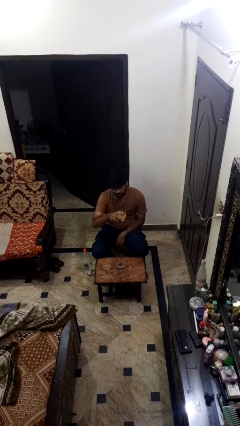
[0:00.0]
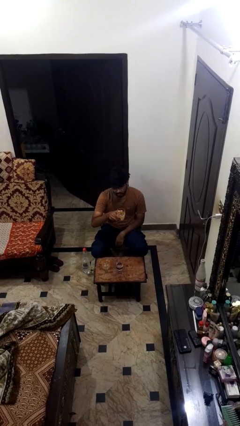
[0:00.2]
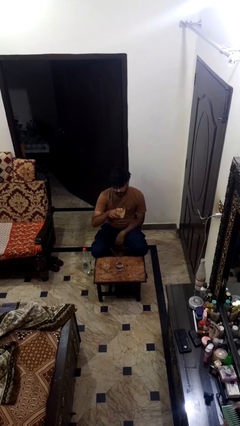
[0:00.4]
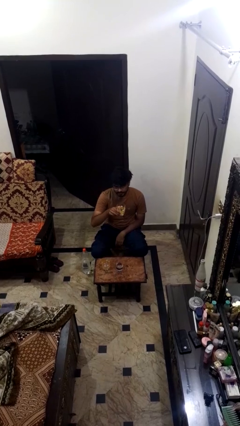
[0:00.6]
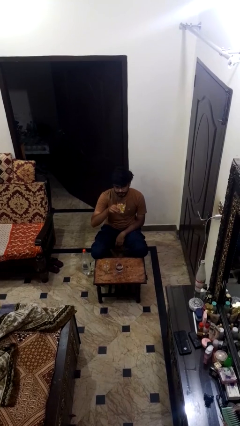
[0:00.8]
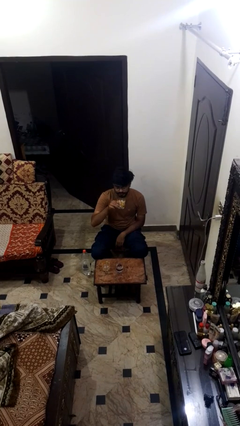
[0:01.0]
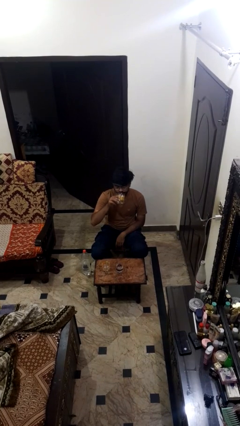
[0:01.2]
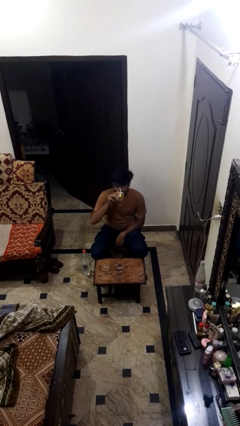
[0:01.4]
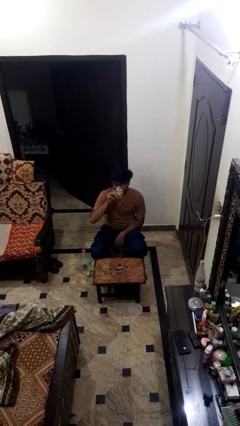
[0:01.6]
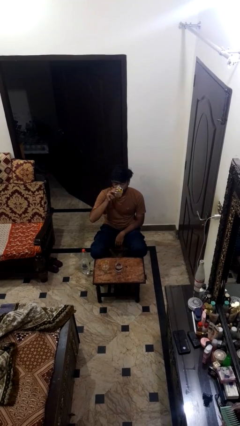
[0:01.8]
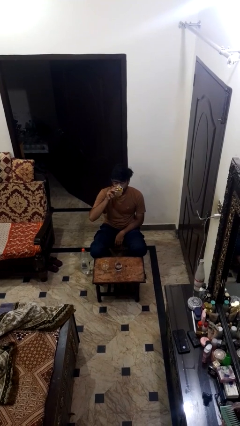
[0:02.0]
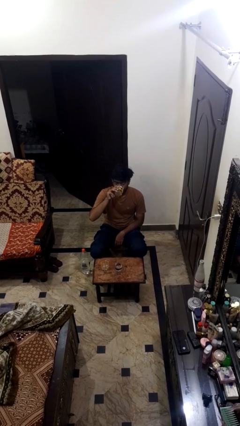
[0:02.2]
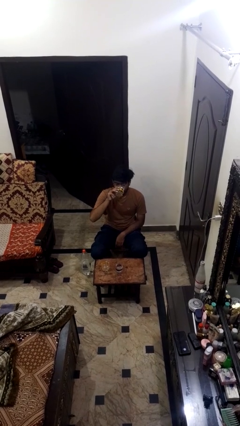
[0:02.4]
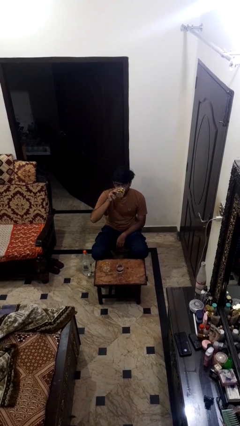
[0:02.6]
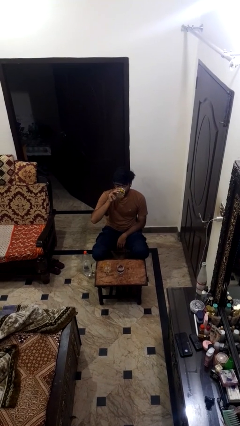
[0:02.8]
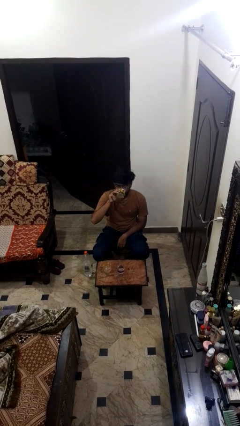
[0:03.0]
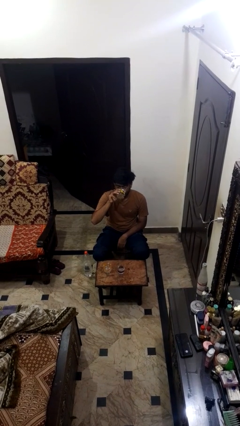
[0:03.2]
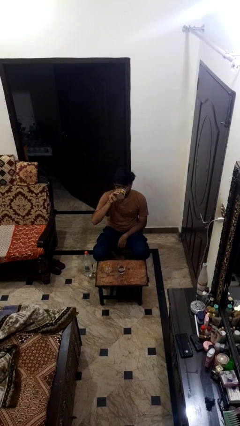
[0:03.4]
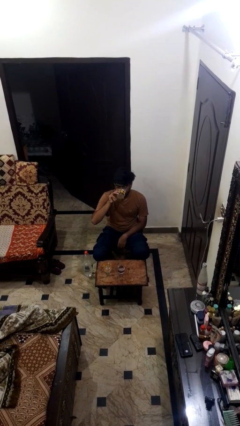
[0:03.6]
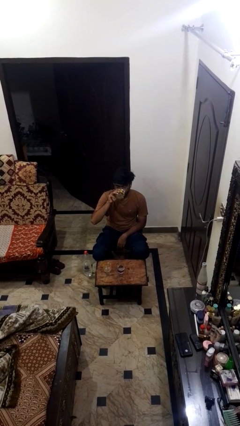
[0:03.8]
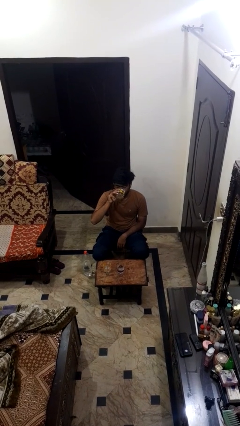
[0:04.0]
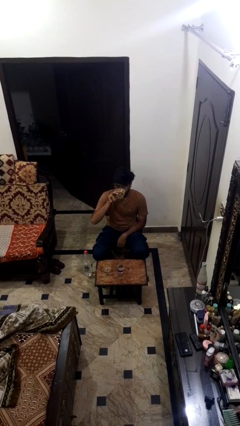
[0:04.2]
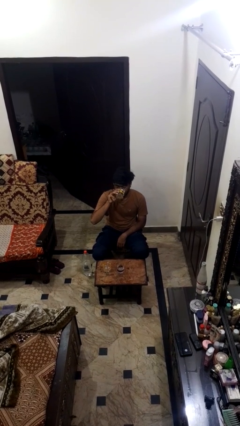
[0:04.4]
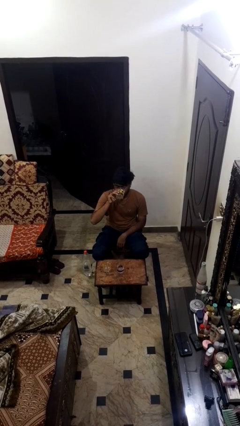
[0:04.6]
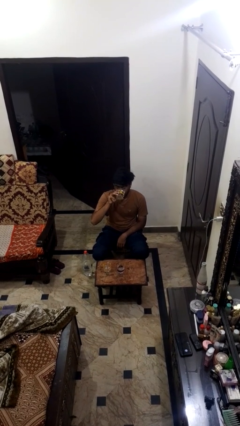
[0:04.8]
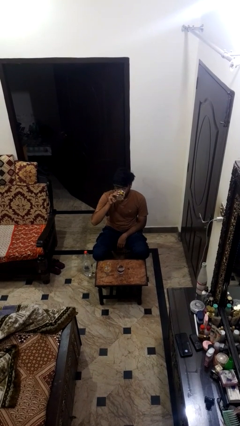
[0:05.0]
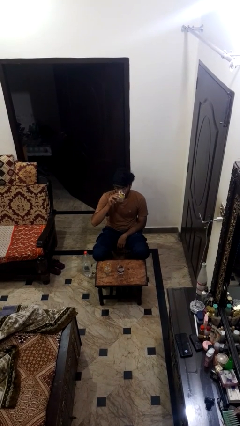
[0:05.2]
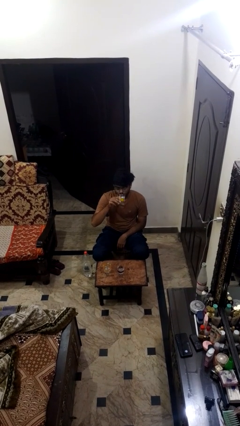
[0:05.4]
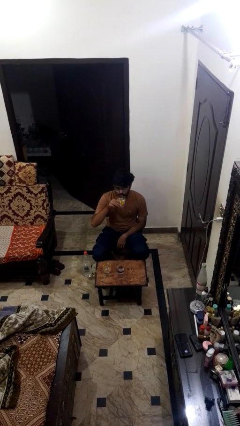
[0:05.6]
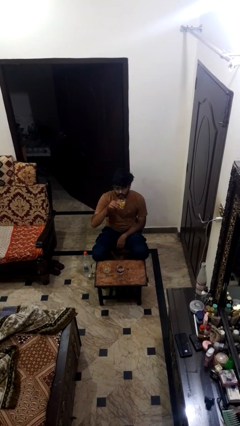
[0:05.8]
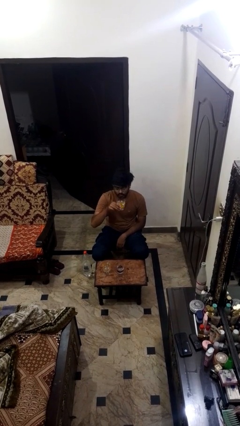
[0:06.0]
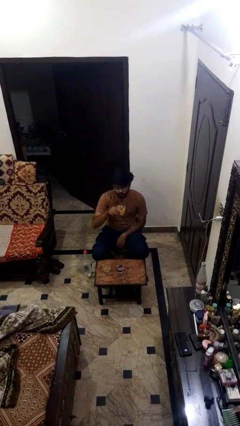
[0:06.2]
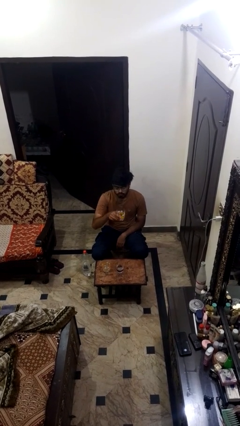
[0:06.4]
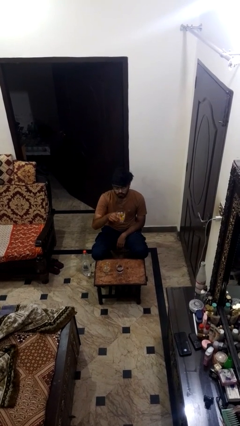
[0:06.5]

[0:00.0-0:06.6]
person drinks from shotglass

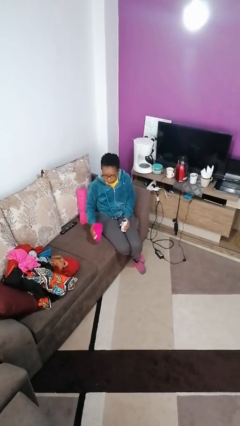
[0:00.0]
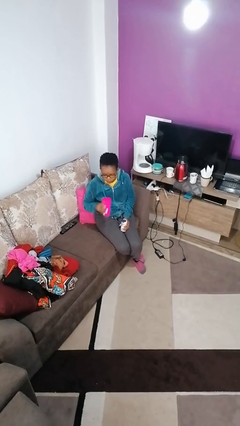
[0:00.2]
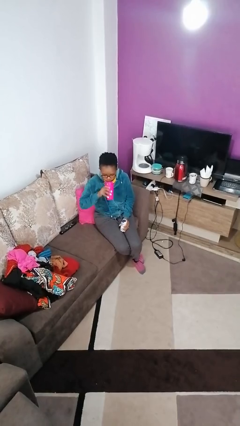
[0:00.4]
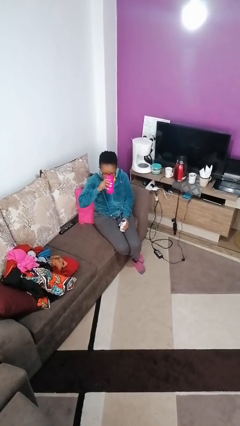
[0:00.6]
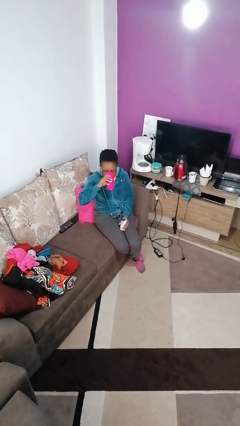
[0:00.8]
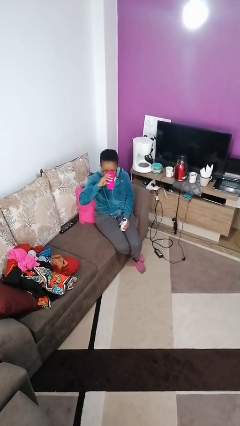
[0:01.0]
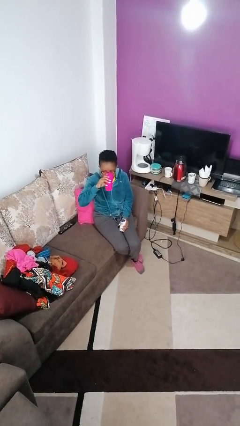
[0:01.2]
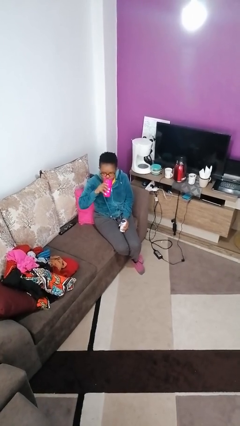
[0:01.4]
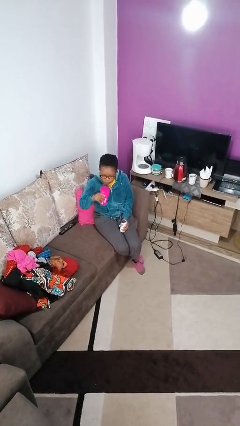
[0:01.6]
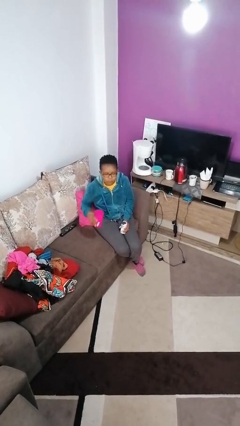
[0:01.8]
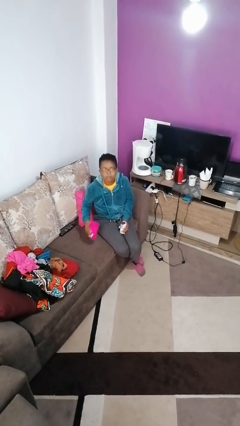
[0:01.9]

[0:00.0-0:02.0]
person drinks from cup

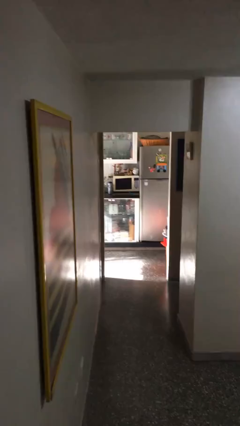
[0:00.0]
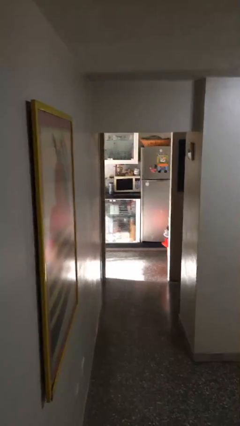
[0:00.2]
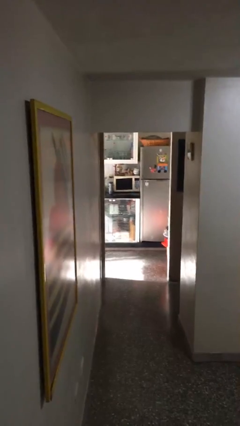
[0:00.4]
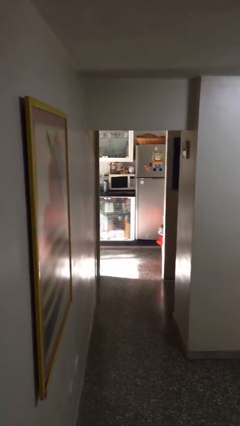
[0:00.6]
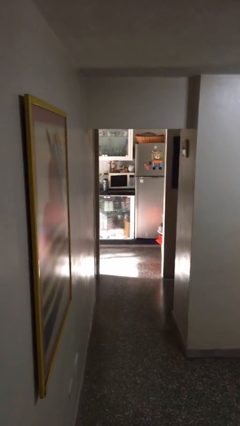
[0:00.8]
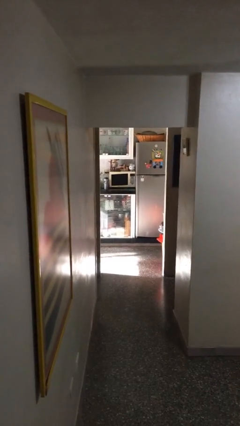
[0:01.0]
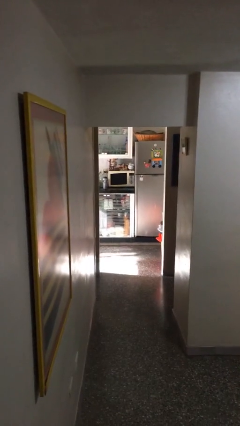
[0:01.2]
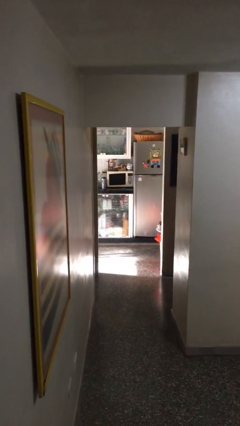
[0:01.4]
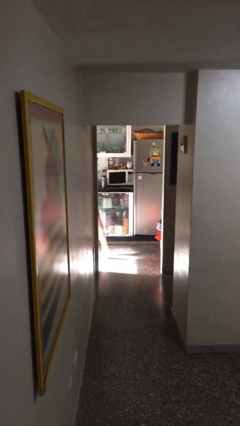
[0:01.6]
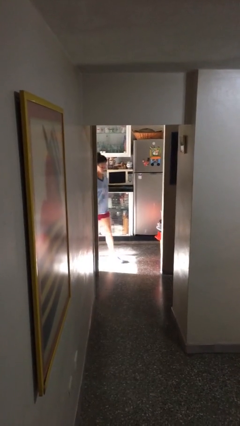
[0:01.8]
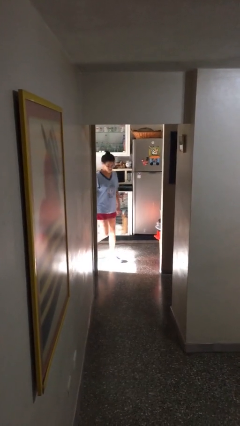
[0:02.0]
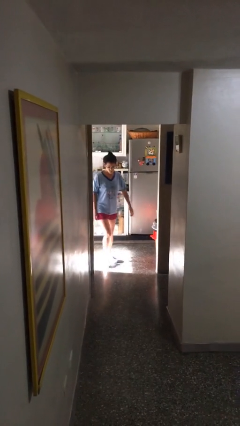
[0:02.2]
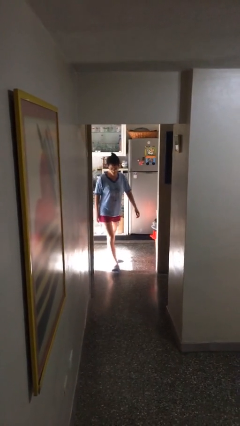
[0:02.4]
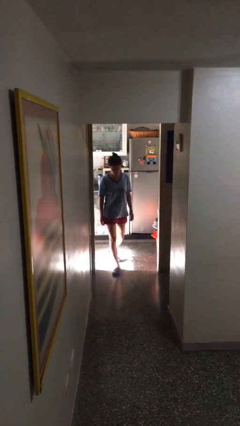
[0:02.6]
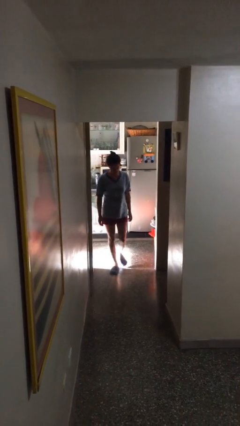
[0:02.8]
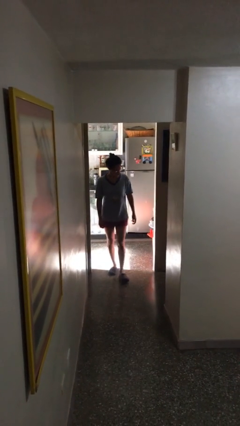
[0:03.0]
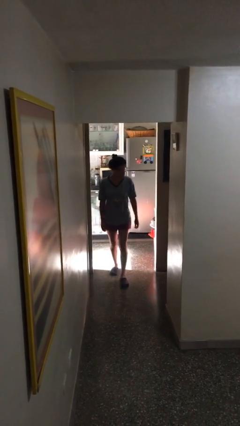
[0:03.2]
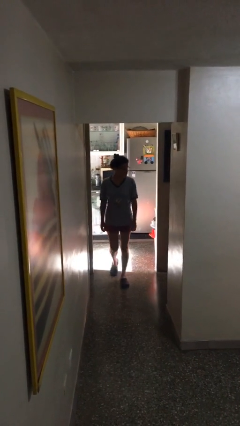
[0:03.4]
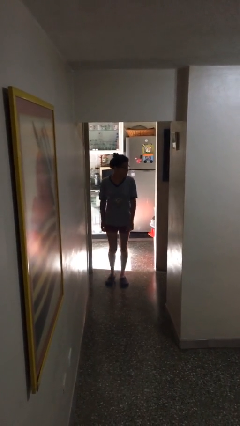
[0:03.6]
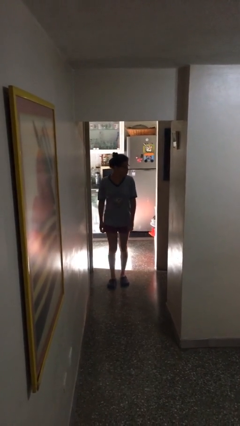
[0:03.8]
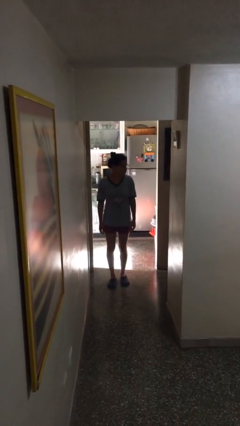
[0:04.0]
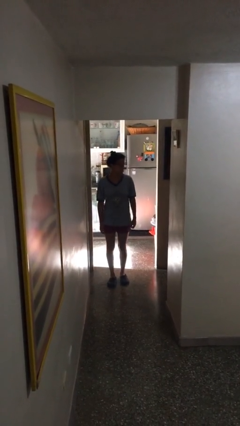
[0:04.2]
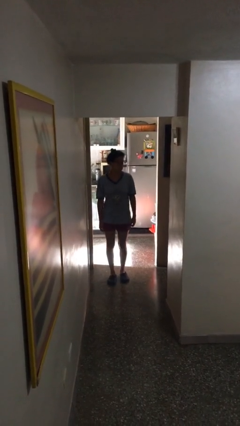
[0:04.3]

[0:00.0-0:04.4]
person enters scene through structure

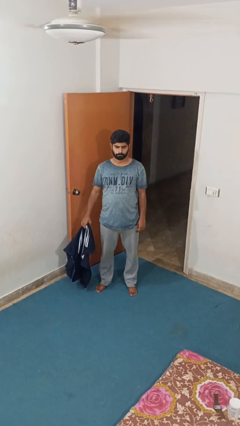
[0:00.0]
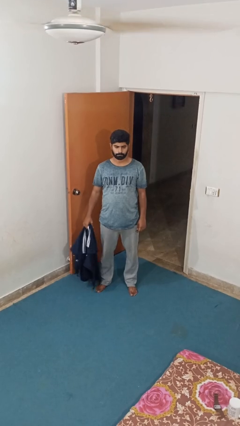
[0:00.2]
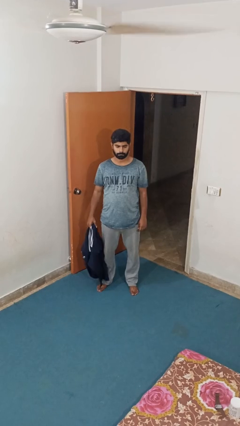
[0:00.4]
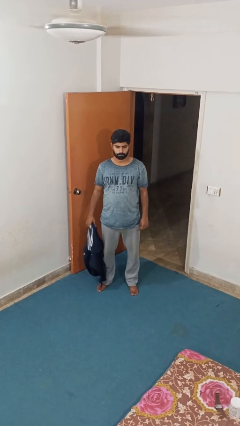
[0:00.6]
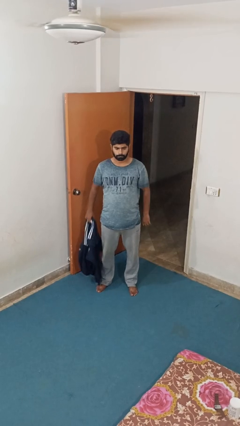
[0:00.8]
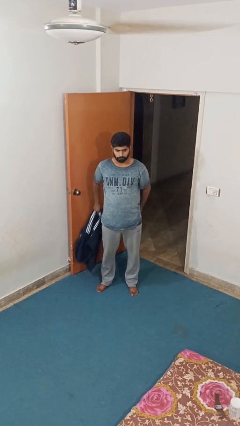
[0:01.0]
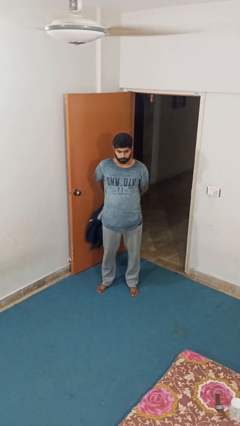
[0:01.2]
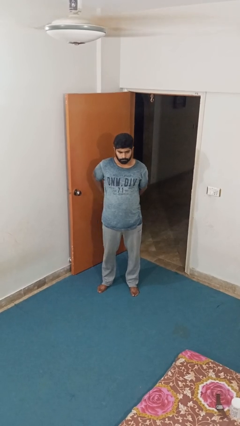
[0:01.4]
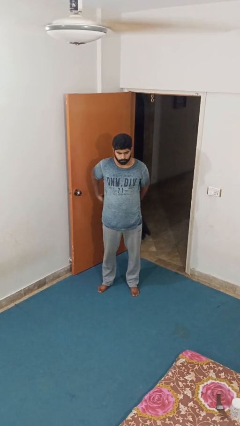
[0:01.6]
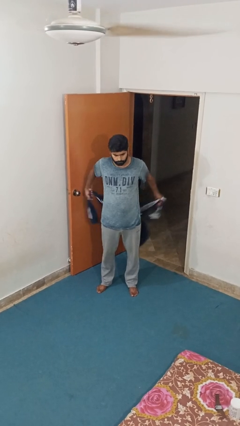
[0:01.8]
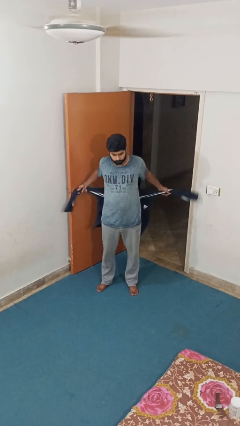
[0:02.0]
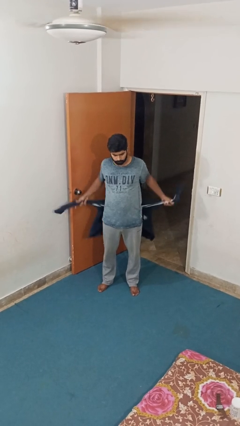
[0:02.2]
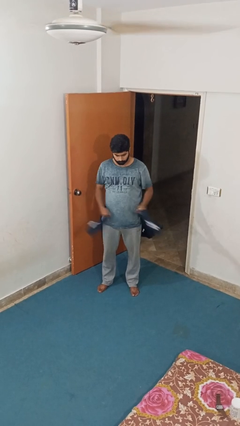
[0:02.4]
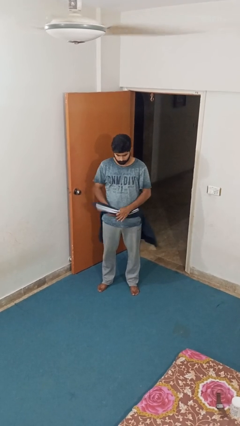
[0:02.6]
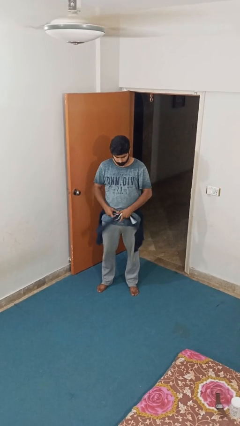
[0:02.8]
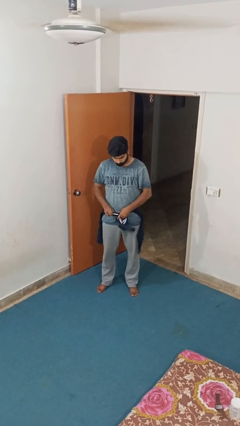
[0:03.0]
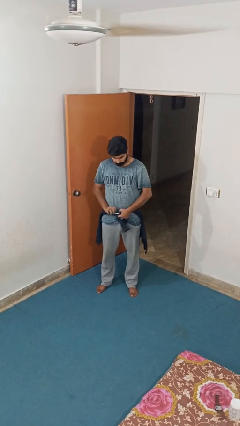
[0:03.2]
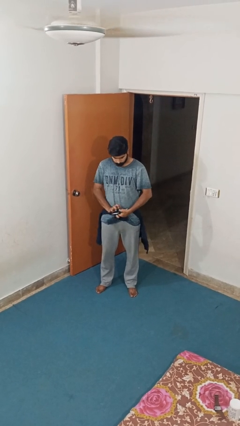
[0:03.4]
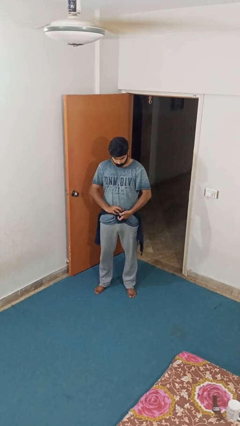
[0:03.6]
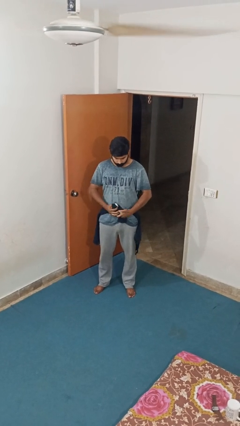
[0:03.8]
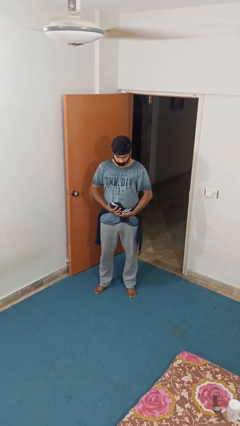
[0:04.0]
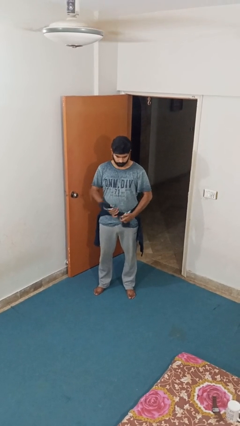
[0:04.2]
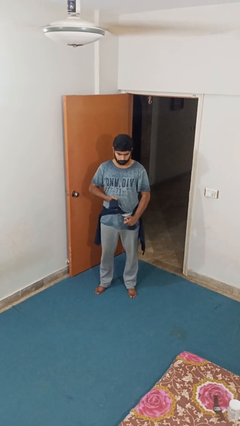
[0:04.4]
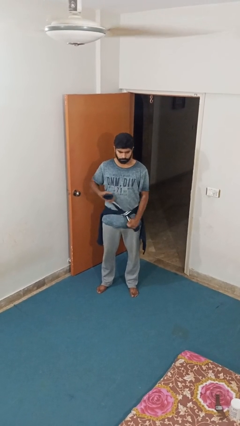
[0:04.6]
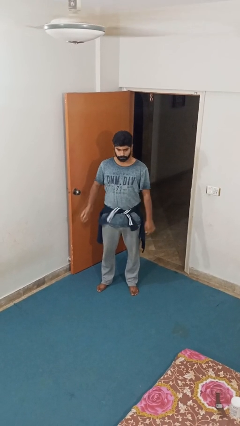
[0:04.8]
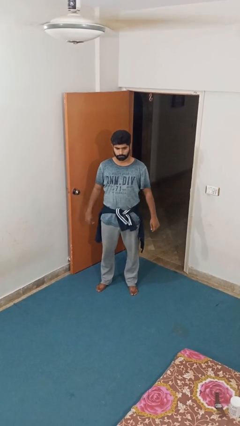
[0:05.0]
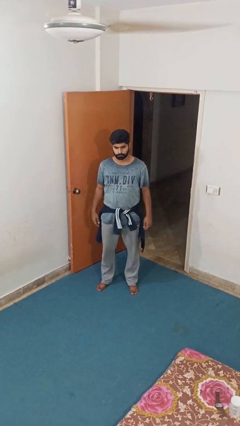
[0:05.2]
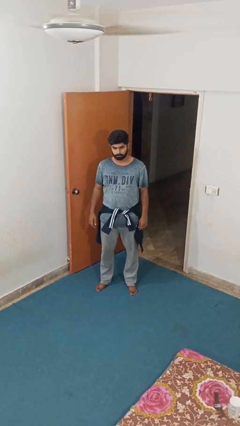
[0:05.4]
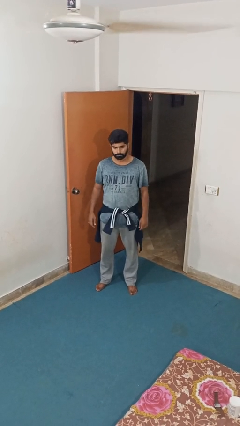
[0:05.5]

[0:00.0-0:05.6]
person ties jacket around waist
